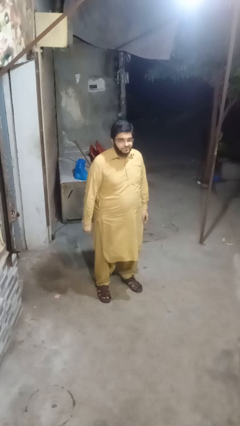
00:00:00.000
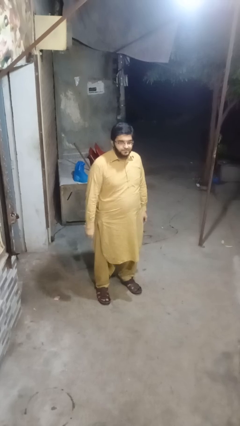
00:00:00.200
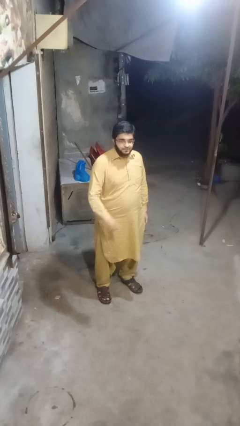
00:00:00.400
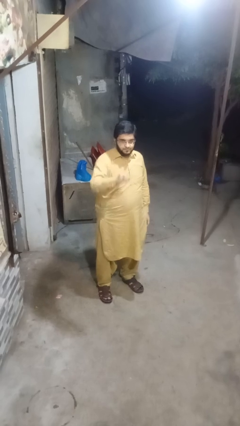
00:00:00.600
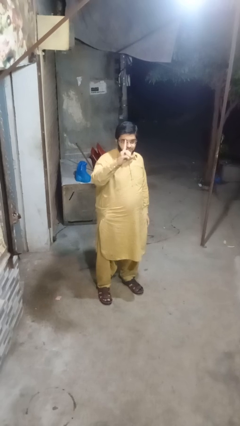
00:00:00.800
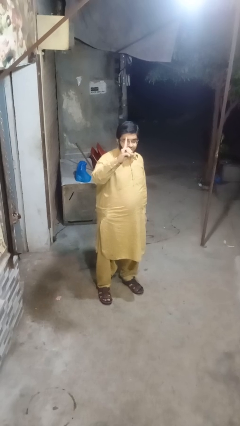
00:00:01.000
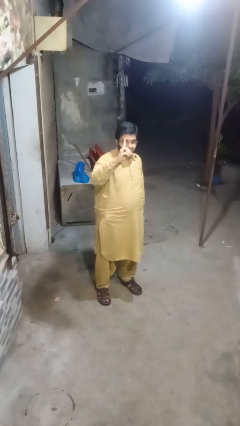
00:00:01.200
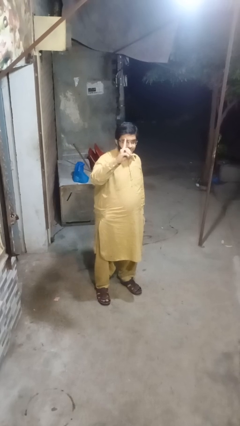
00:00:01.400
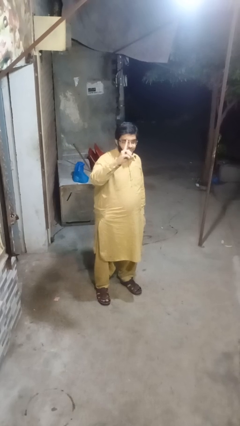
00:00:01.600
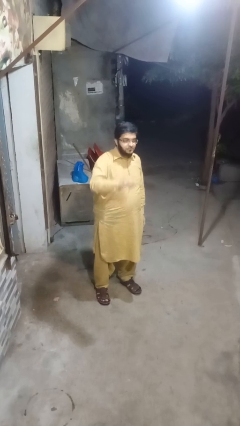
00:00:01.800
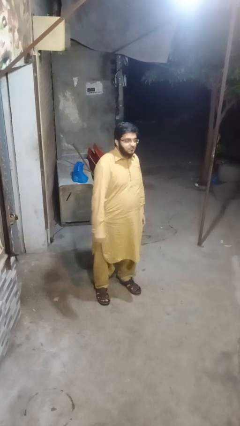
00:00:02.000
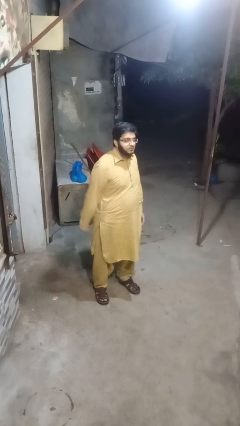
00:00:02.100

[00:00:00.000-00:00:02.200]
person gestures number one

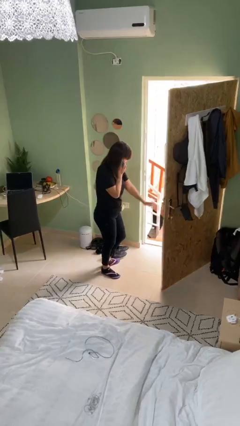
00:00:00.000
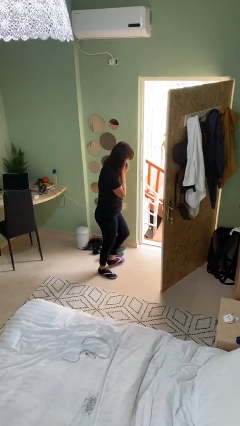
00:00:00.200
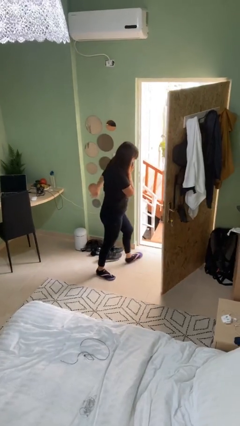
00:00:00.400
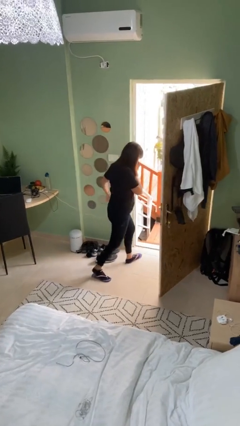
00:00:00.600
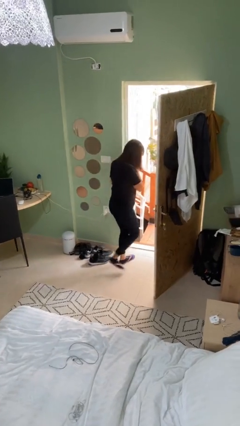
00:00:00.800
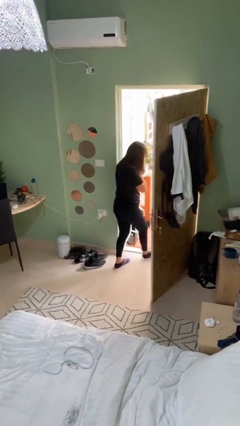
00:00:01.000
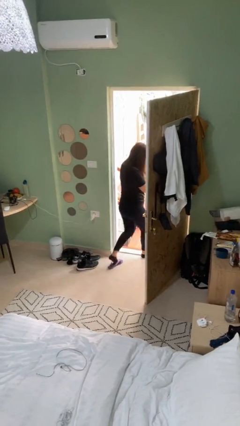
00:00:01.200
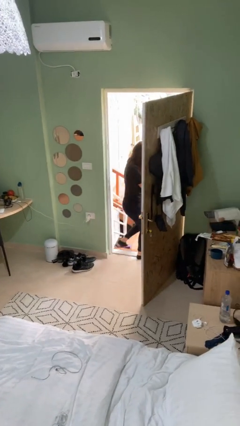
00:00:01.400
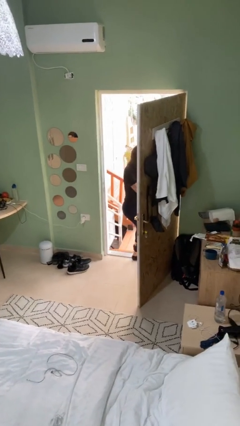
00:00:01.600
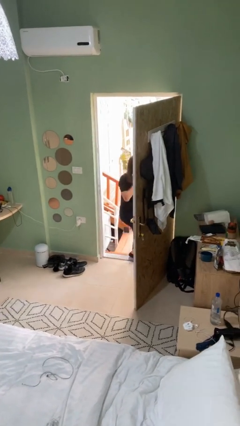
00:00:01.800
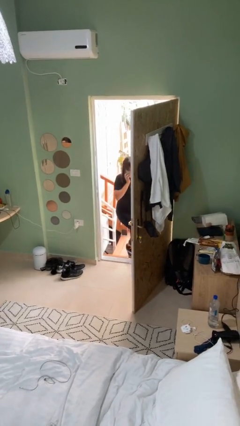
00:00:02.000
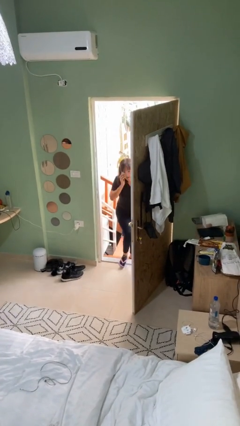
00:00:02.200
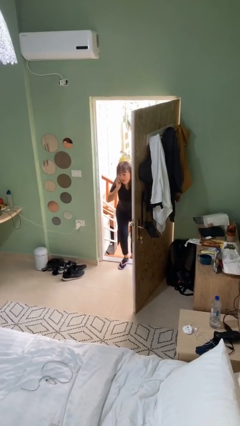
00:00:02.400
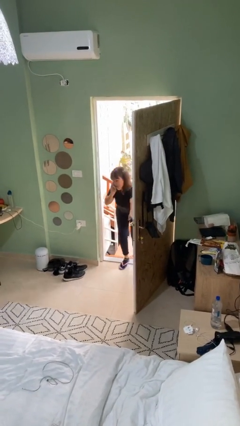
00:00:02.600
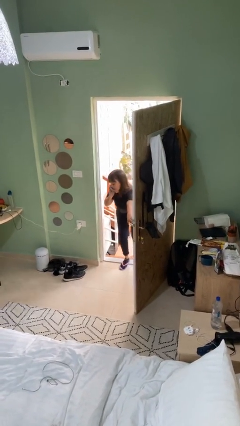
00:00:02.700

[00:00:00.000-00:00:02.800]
person exits scene through structure

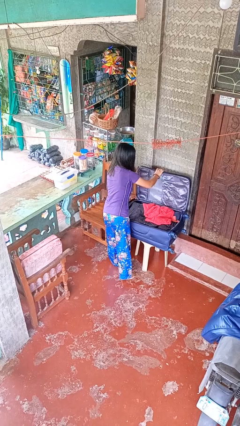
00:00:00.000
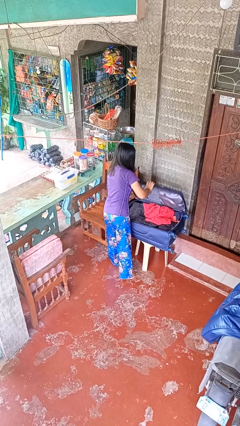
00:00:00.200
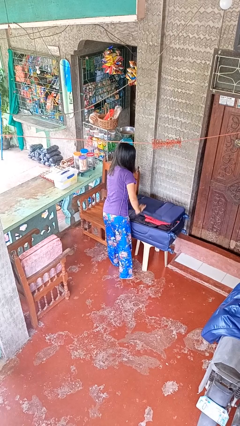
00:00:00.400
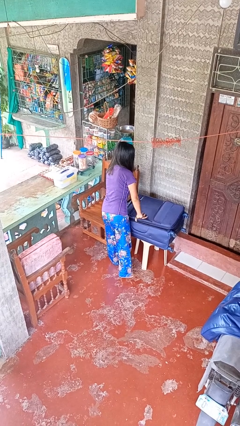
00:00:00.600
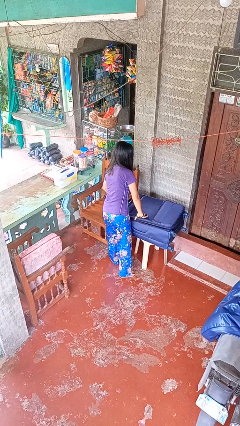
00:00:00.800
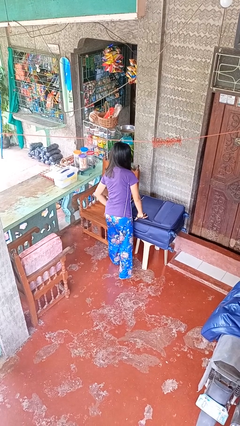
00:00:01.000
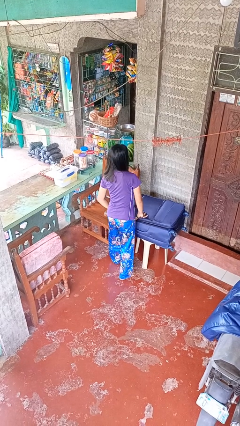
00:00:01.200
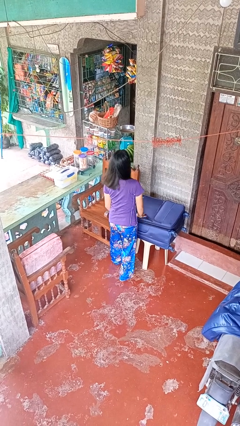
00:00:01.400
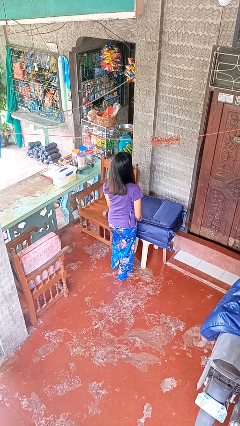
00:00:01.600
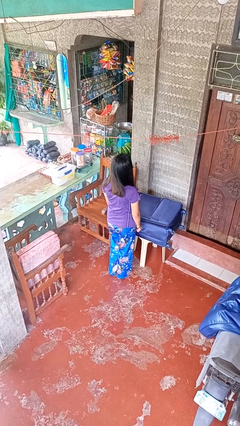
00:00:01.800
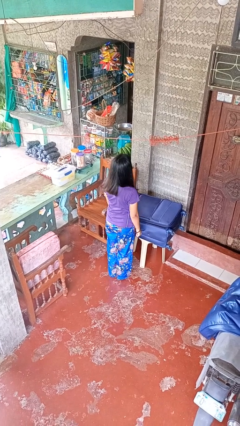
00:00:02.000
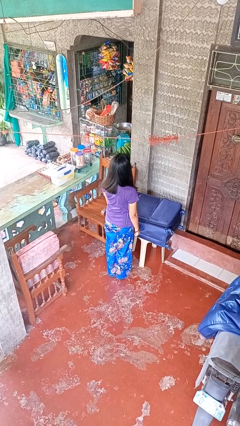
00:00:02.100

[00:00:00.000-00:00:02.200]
person closes suitcase

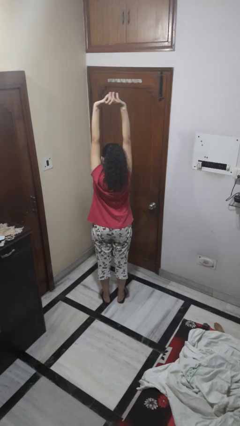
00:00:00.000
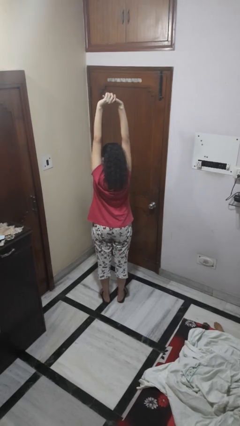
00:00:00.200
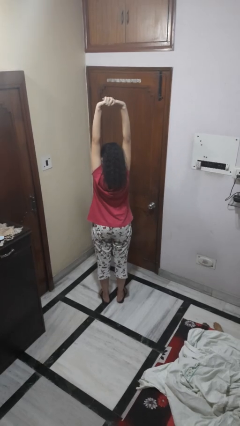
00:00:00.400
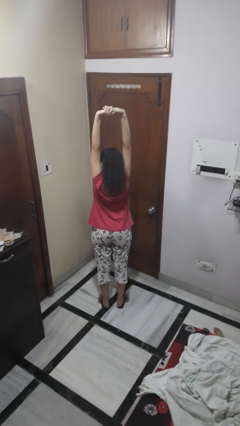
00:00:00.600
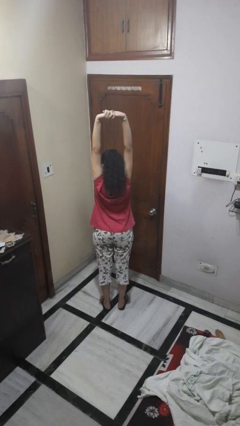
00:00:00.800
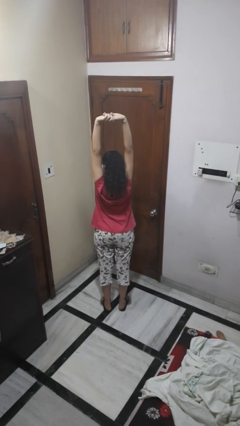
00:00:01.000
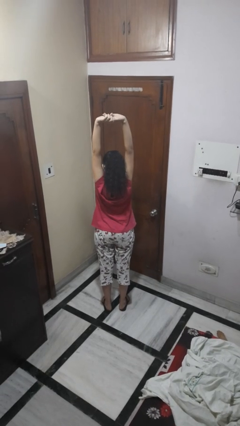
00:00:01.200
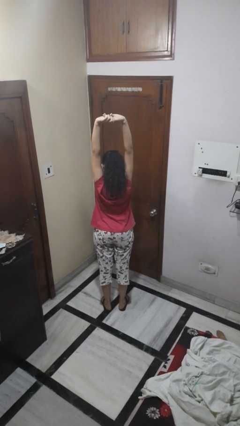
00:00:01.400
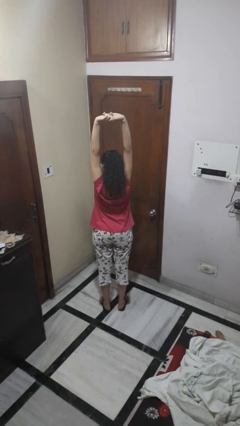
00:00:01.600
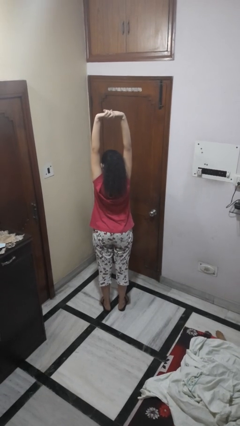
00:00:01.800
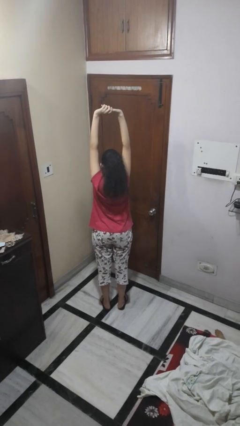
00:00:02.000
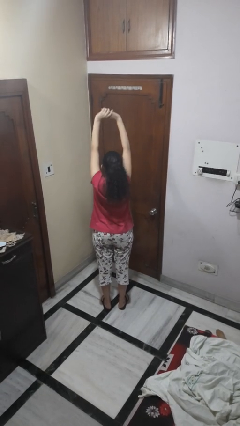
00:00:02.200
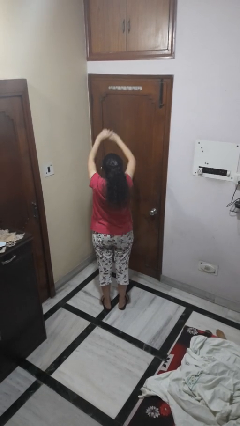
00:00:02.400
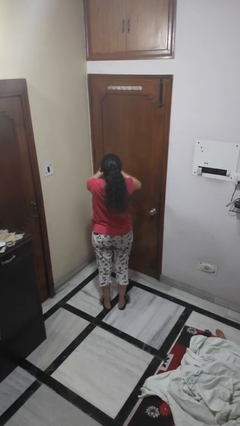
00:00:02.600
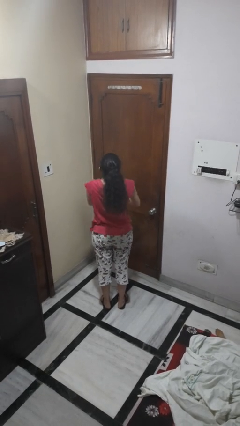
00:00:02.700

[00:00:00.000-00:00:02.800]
person stretches arms over head

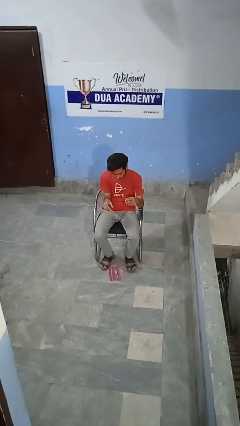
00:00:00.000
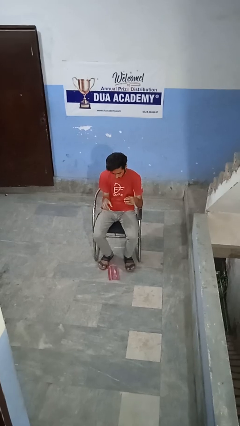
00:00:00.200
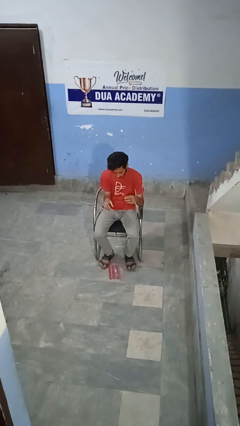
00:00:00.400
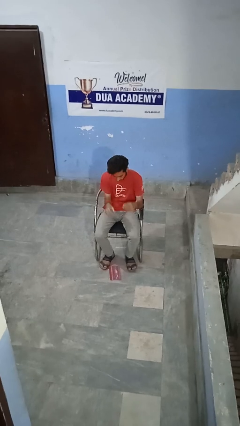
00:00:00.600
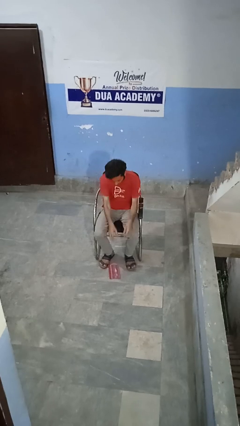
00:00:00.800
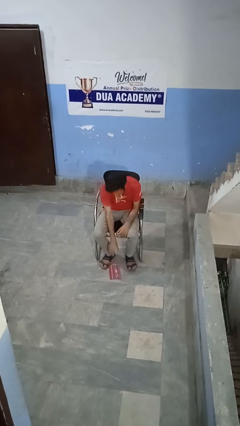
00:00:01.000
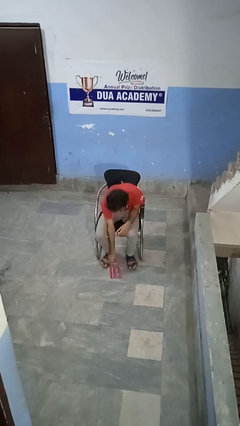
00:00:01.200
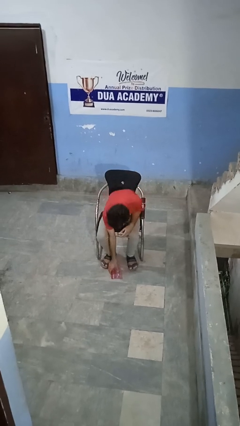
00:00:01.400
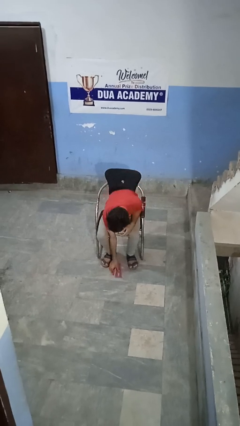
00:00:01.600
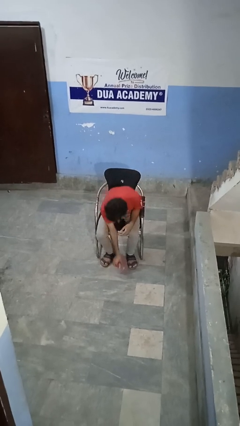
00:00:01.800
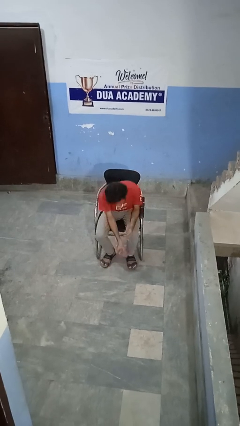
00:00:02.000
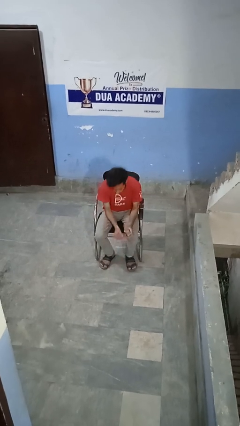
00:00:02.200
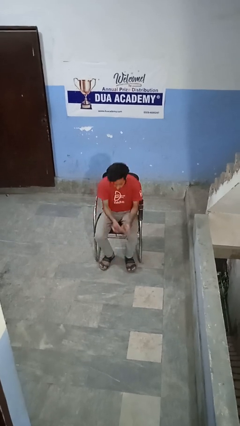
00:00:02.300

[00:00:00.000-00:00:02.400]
person picks up object from floor

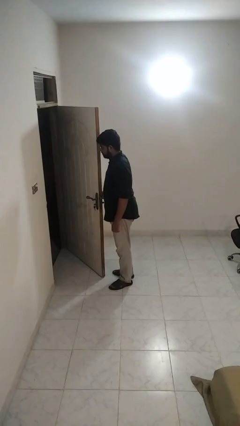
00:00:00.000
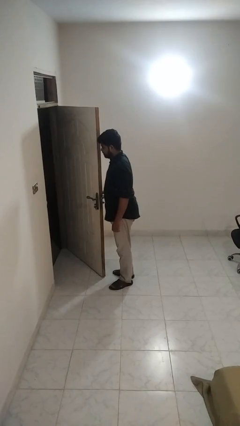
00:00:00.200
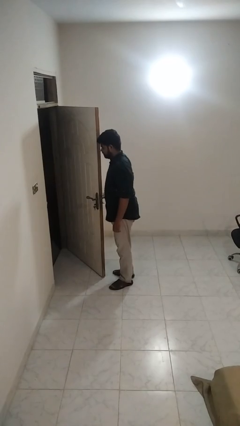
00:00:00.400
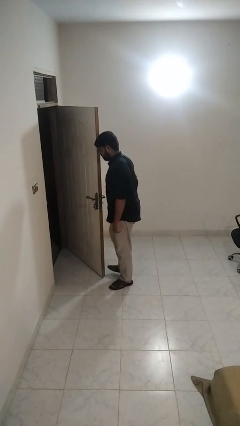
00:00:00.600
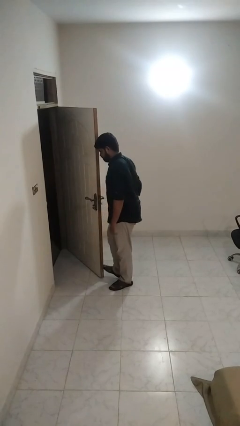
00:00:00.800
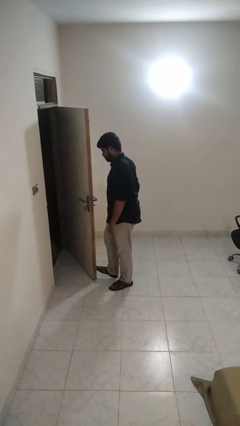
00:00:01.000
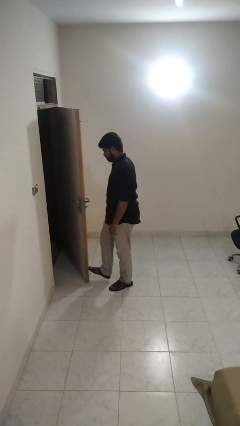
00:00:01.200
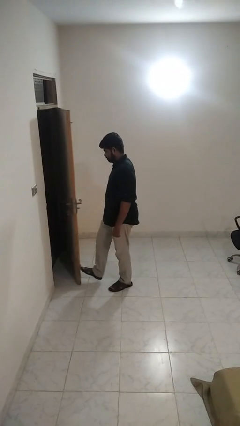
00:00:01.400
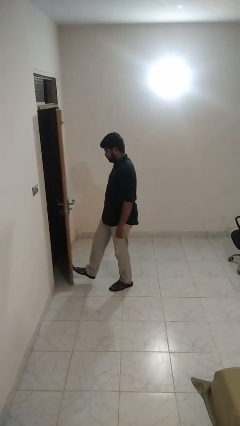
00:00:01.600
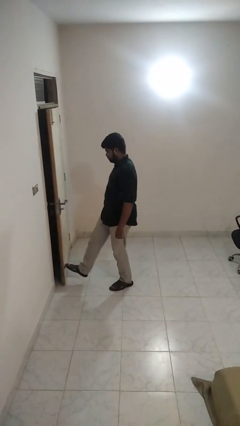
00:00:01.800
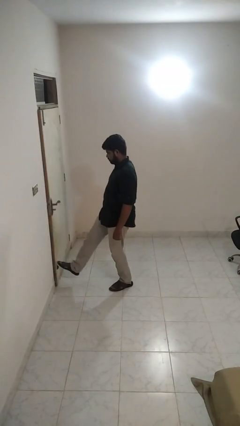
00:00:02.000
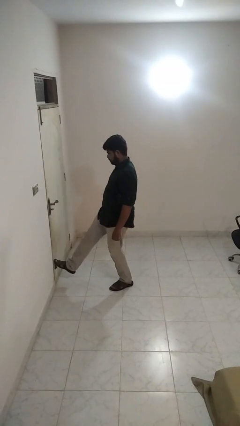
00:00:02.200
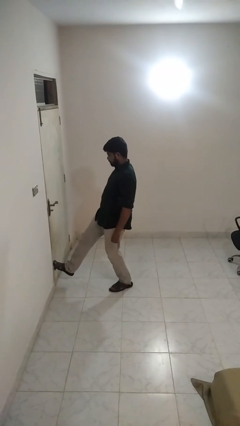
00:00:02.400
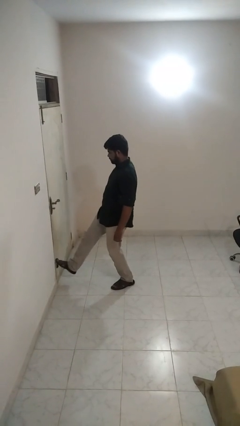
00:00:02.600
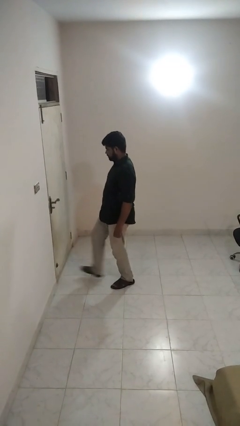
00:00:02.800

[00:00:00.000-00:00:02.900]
person closes door with foot

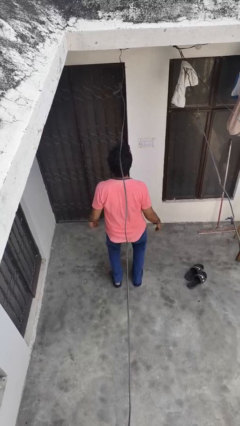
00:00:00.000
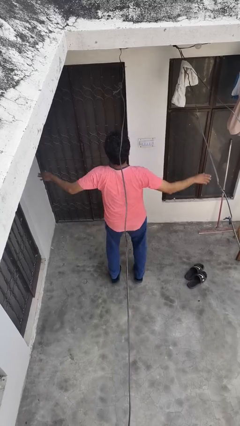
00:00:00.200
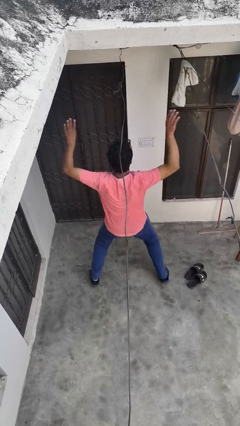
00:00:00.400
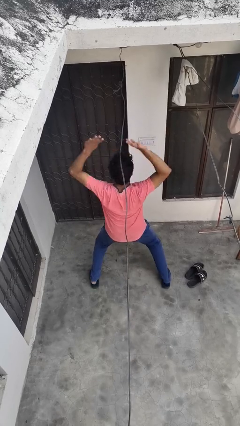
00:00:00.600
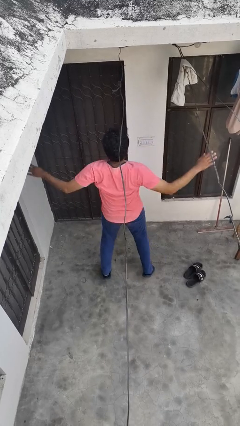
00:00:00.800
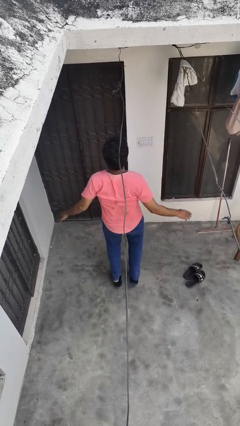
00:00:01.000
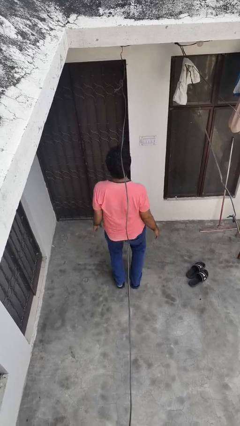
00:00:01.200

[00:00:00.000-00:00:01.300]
person exercises with jumping jacks

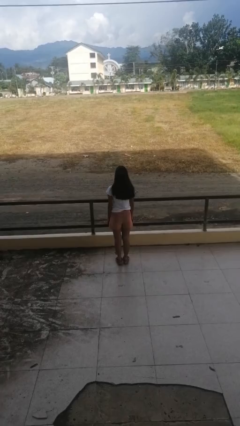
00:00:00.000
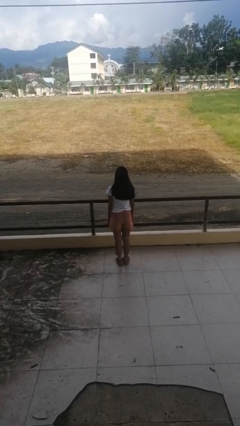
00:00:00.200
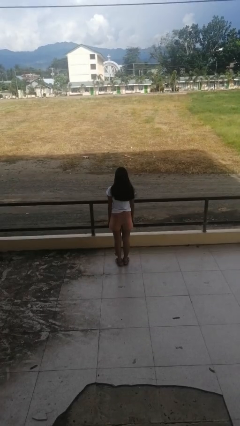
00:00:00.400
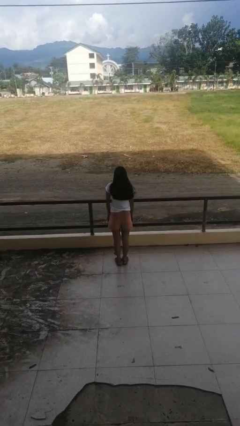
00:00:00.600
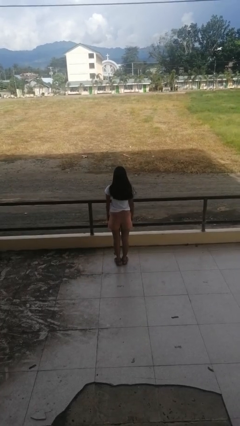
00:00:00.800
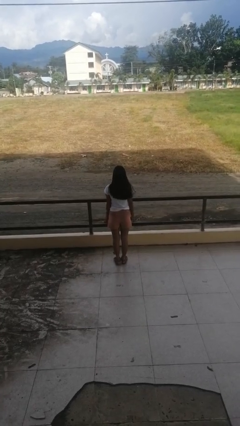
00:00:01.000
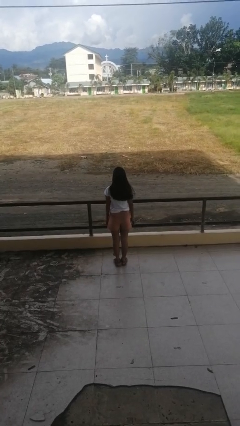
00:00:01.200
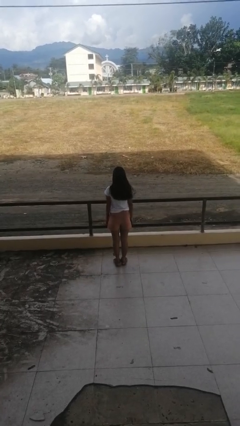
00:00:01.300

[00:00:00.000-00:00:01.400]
person shrugs
